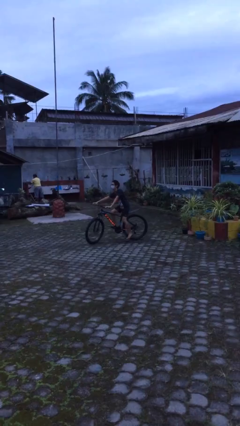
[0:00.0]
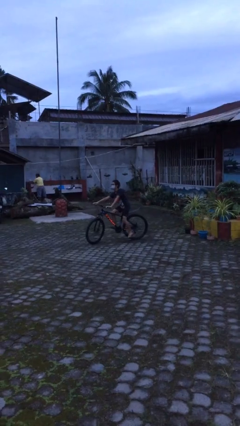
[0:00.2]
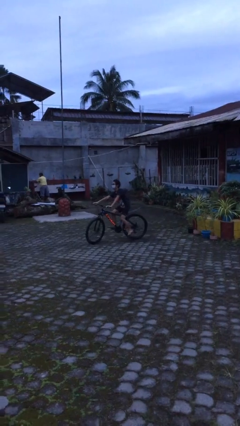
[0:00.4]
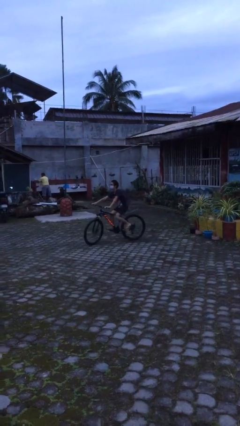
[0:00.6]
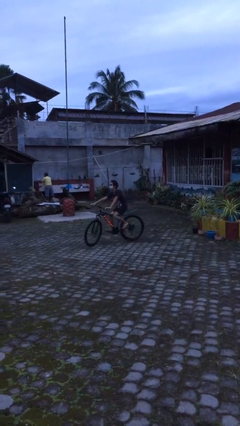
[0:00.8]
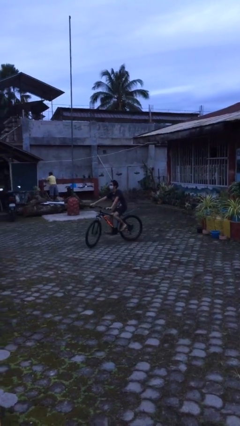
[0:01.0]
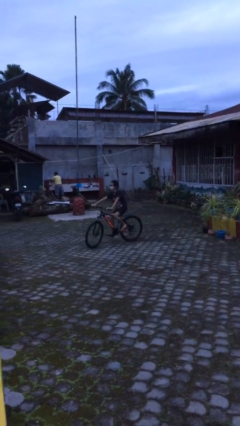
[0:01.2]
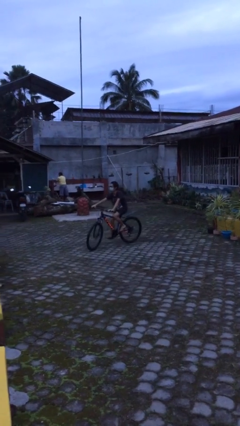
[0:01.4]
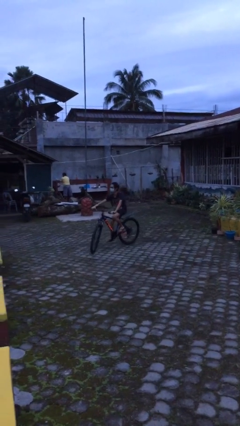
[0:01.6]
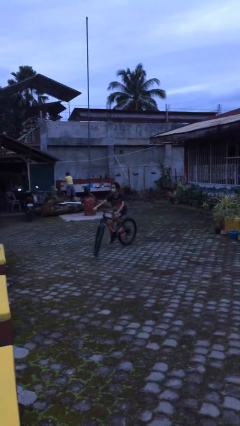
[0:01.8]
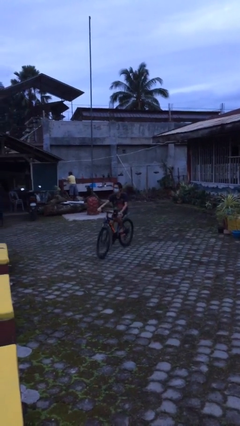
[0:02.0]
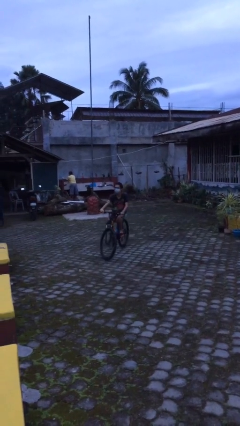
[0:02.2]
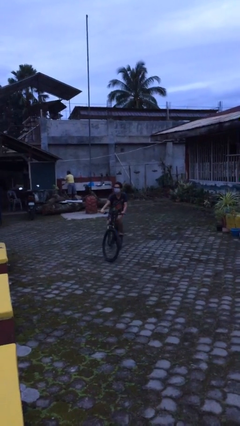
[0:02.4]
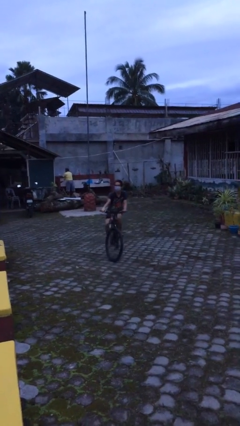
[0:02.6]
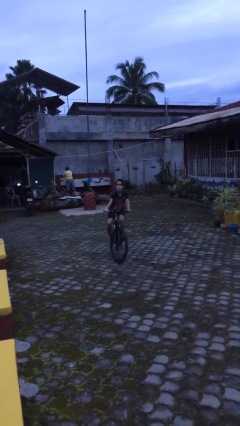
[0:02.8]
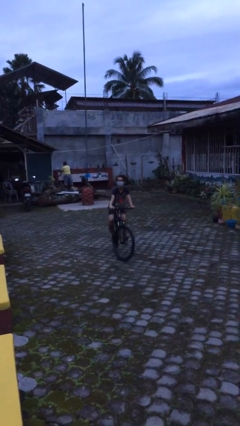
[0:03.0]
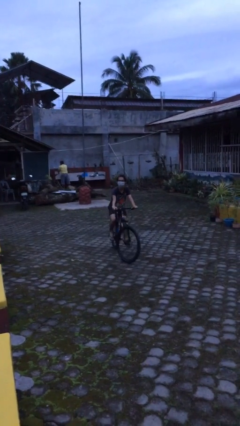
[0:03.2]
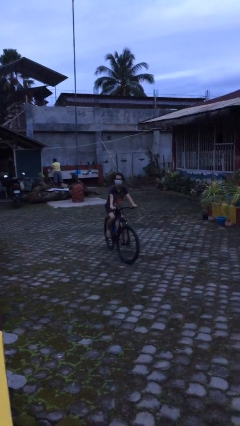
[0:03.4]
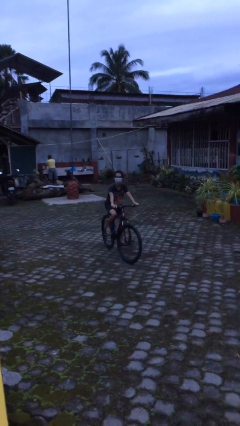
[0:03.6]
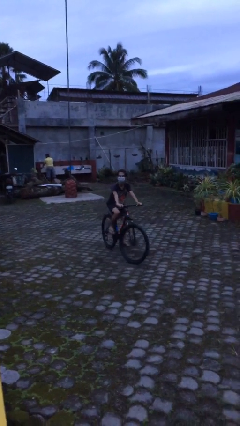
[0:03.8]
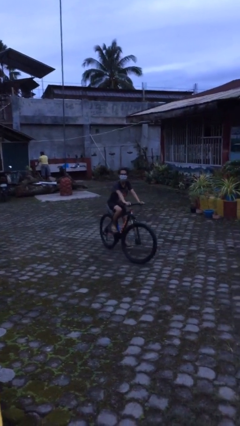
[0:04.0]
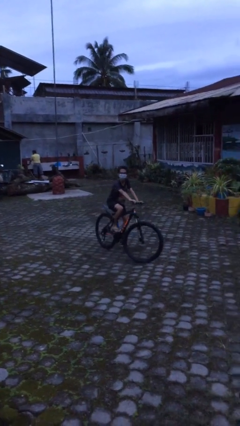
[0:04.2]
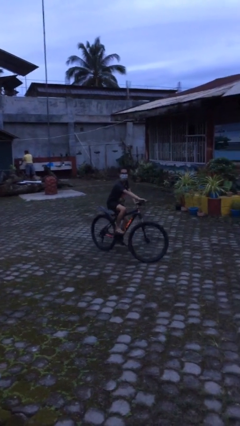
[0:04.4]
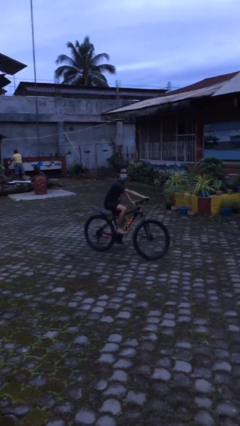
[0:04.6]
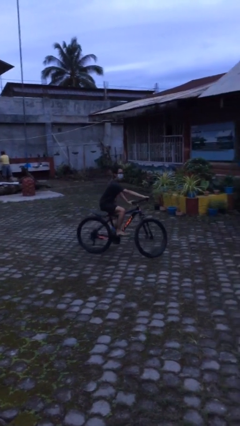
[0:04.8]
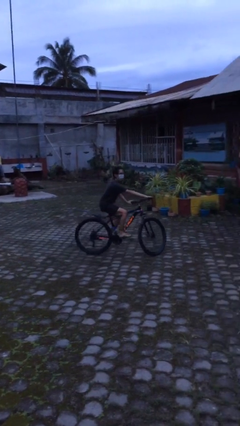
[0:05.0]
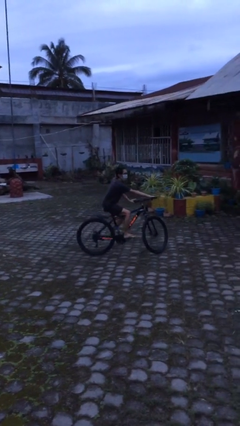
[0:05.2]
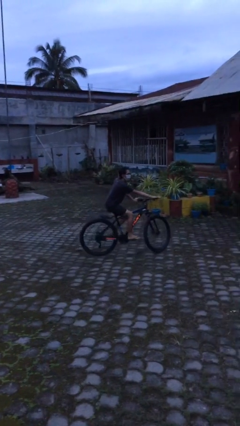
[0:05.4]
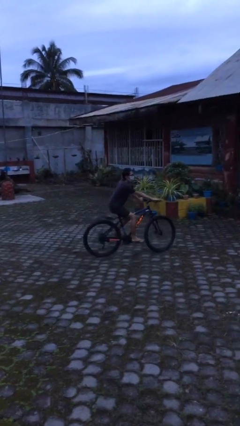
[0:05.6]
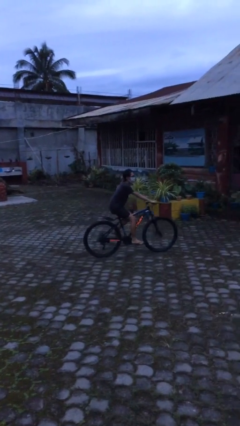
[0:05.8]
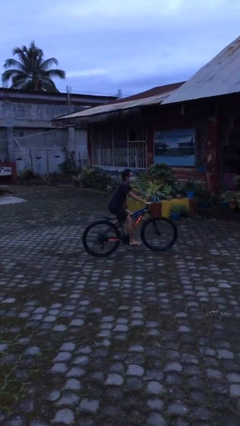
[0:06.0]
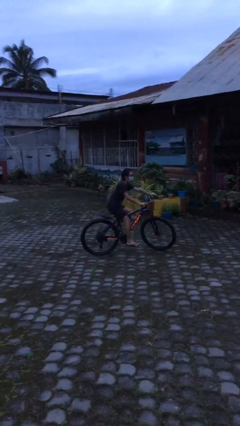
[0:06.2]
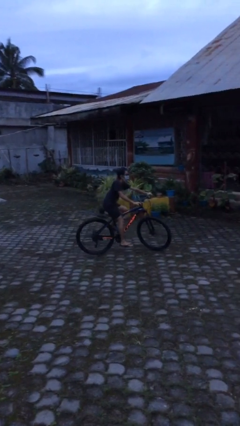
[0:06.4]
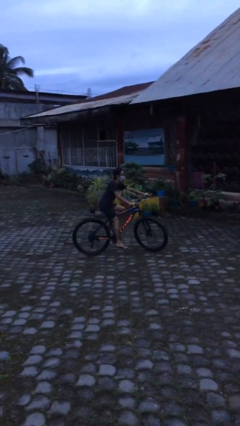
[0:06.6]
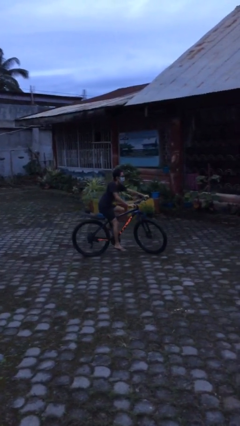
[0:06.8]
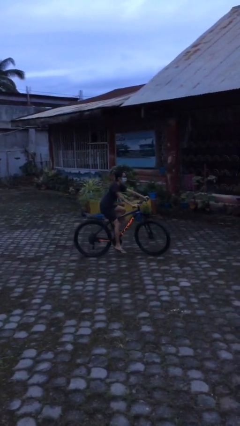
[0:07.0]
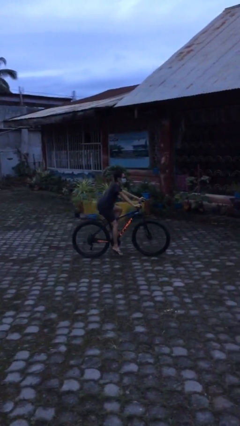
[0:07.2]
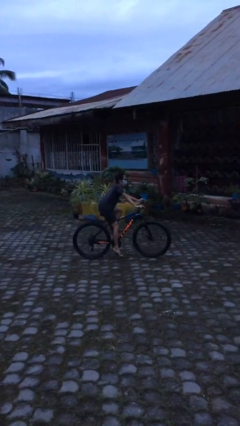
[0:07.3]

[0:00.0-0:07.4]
person rides bicycle

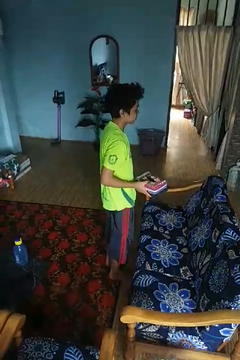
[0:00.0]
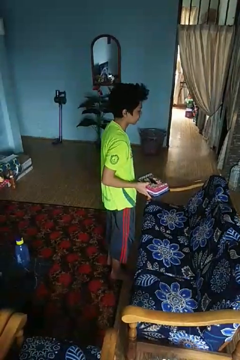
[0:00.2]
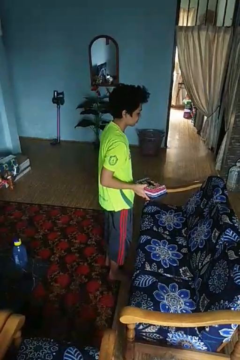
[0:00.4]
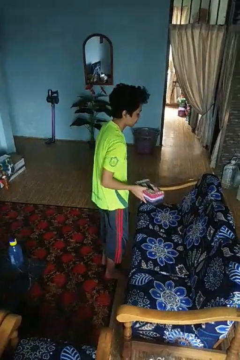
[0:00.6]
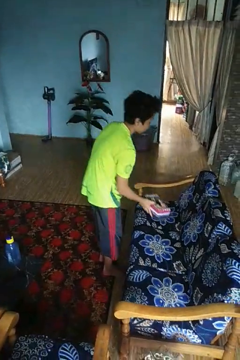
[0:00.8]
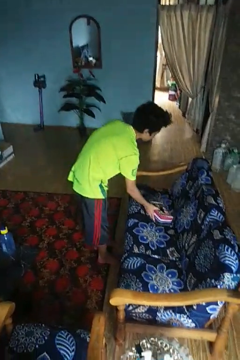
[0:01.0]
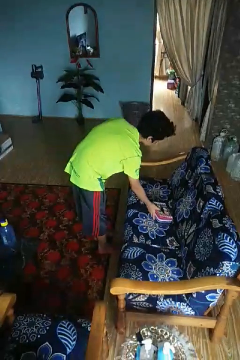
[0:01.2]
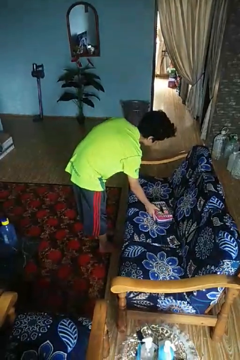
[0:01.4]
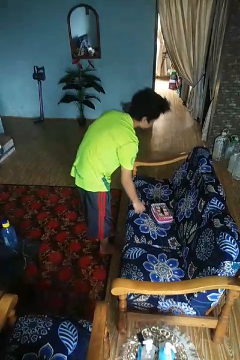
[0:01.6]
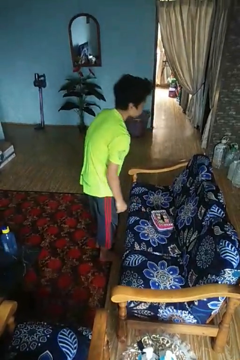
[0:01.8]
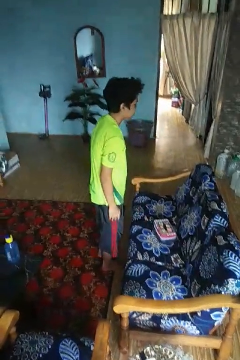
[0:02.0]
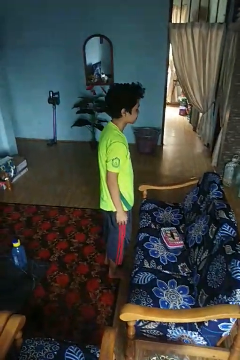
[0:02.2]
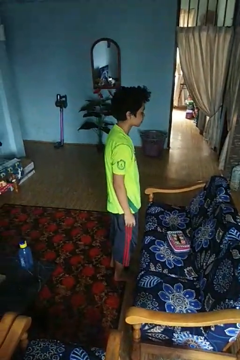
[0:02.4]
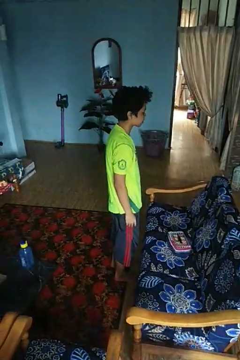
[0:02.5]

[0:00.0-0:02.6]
person puts down object on couch

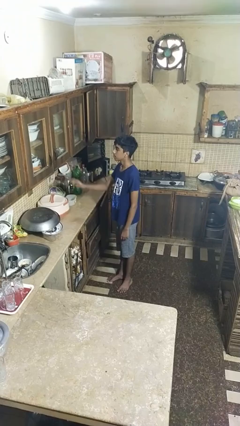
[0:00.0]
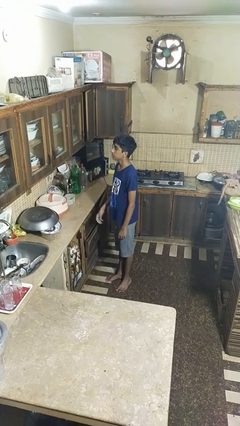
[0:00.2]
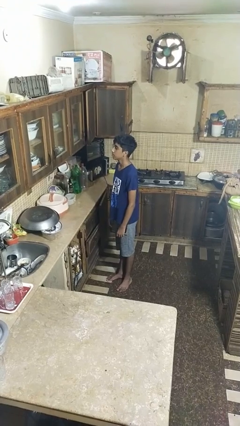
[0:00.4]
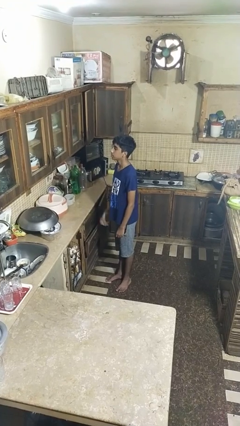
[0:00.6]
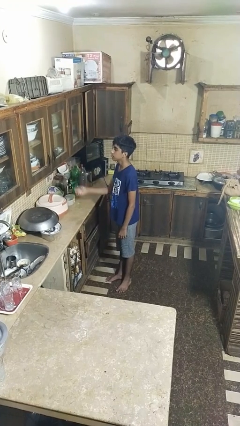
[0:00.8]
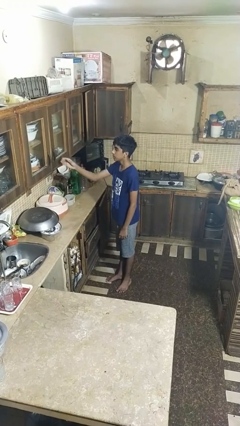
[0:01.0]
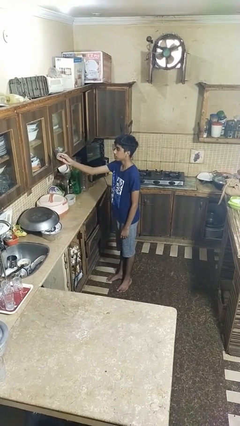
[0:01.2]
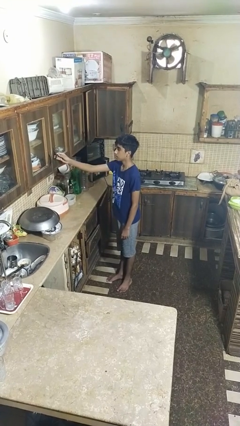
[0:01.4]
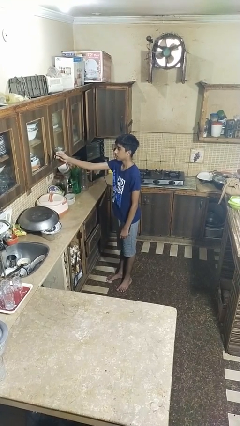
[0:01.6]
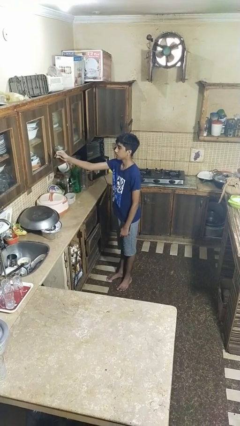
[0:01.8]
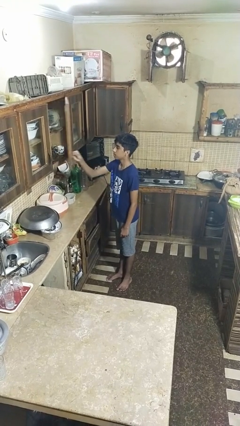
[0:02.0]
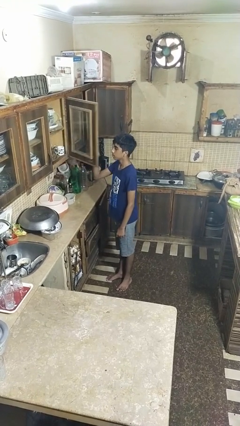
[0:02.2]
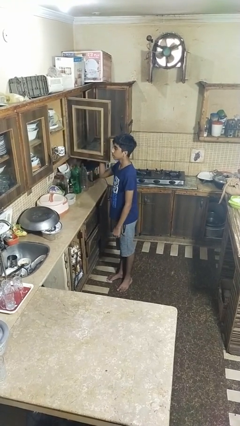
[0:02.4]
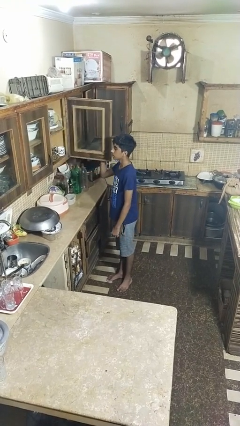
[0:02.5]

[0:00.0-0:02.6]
person opens cabinet

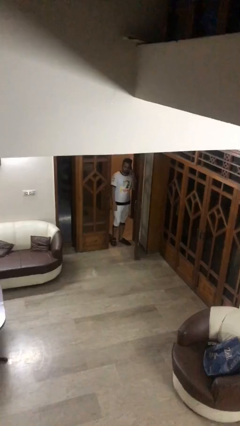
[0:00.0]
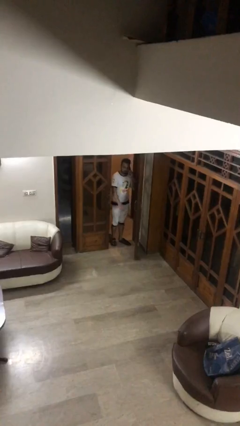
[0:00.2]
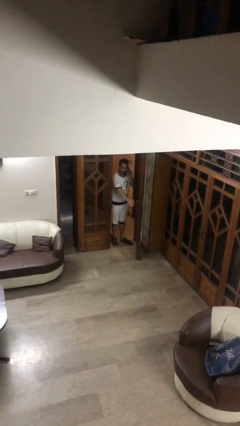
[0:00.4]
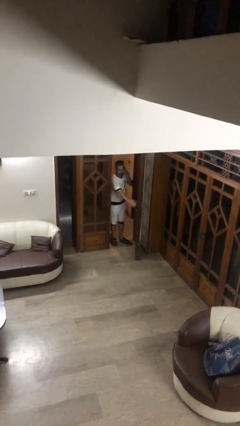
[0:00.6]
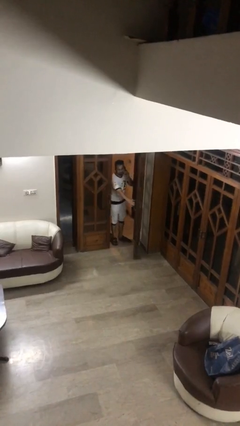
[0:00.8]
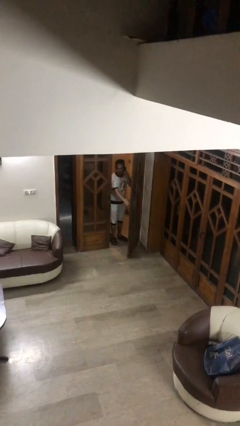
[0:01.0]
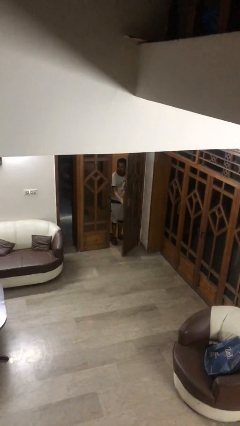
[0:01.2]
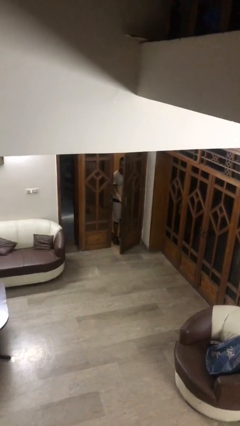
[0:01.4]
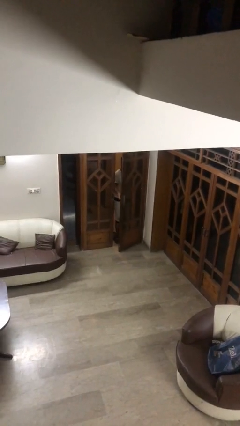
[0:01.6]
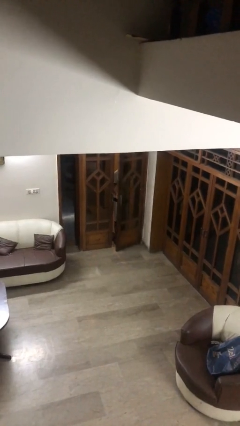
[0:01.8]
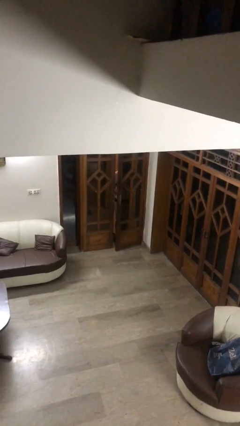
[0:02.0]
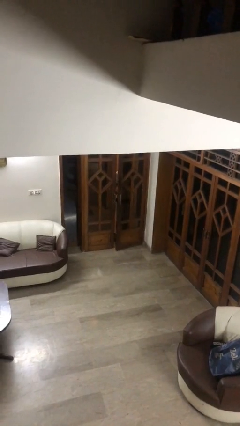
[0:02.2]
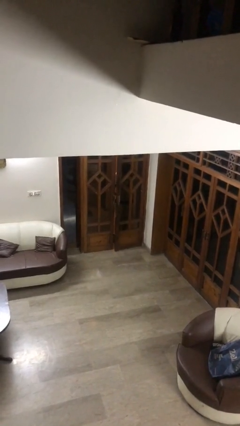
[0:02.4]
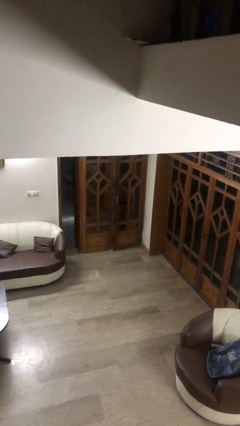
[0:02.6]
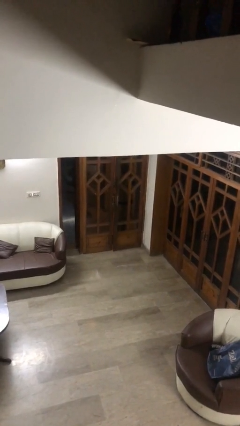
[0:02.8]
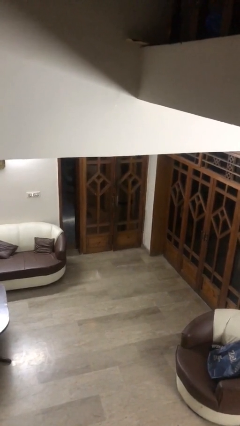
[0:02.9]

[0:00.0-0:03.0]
person closes facility door

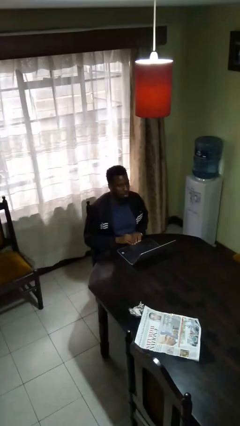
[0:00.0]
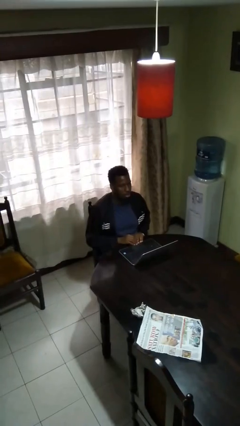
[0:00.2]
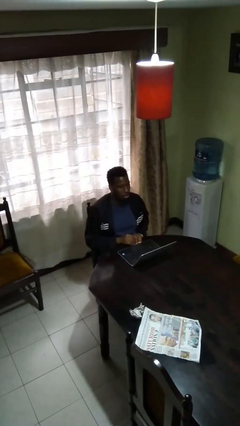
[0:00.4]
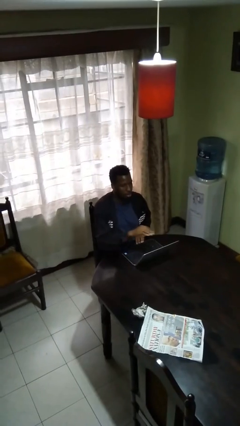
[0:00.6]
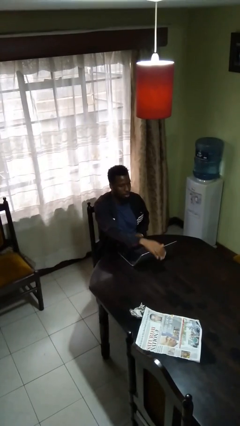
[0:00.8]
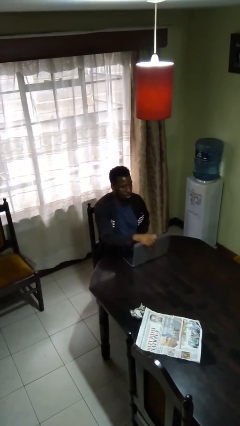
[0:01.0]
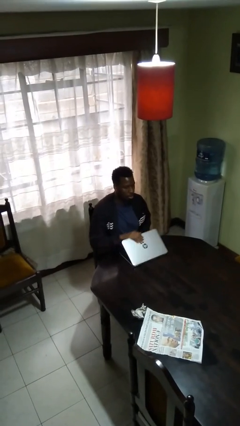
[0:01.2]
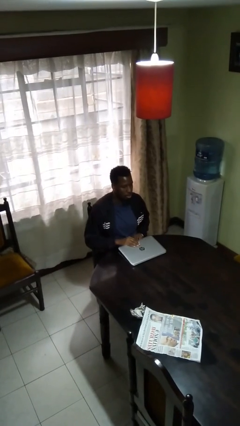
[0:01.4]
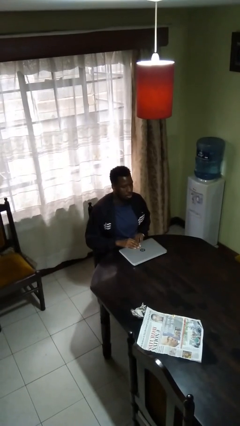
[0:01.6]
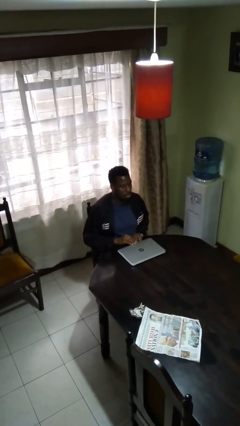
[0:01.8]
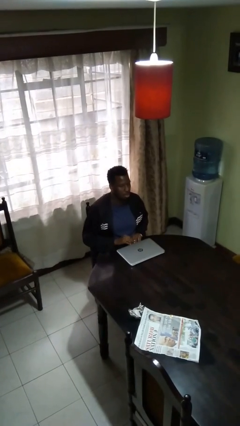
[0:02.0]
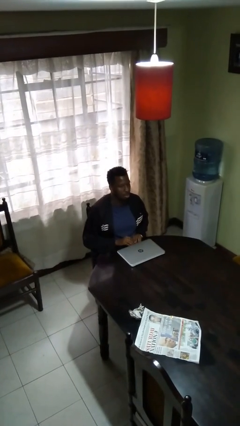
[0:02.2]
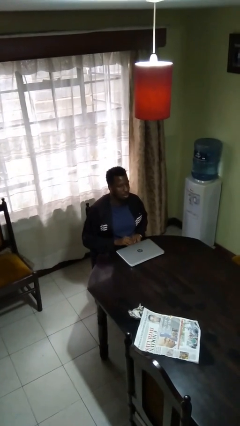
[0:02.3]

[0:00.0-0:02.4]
person closes laptop
